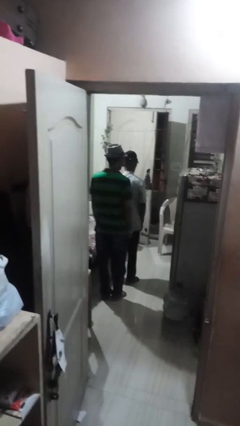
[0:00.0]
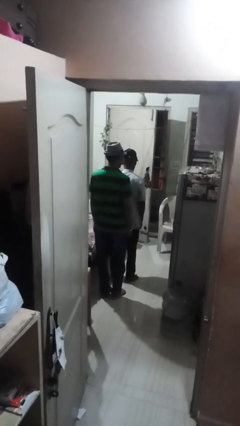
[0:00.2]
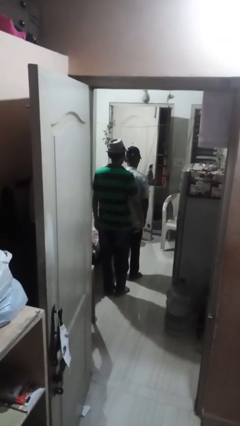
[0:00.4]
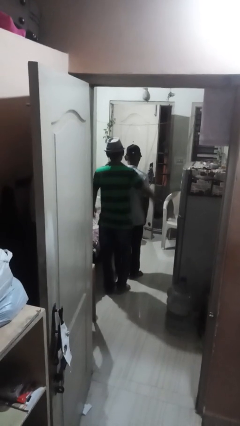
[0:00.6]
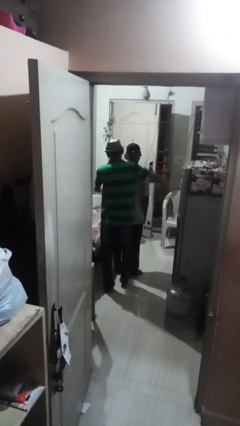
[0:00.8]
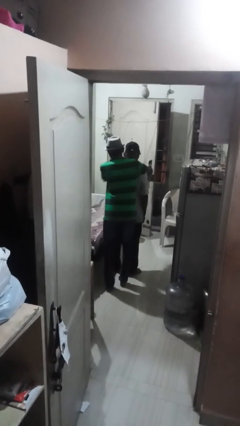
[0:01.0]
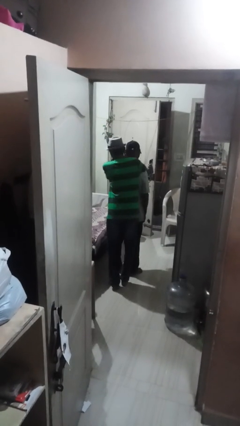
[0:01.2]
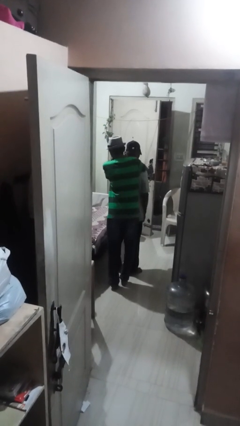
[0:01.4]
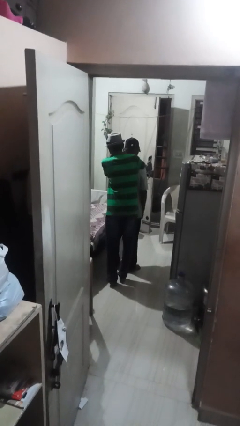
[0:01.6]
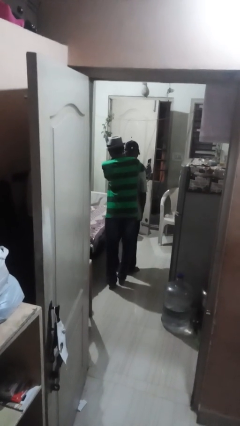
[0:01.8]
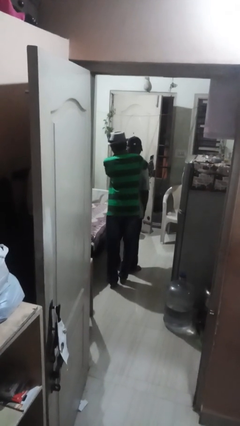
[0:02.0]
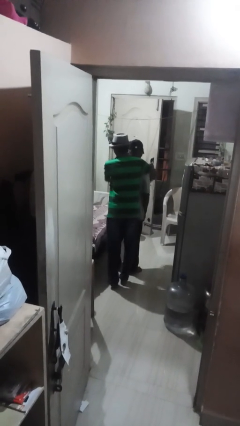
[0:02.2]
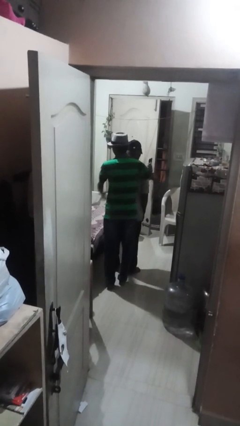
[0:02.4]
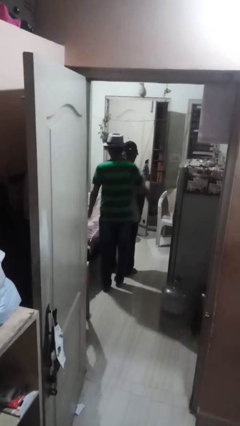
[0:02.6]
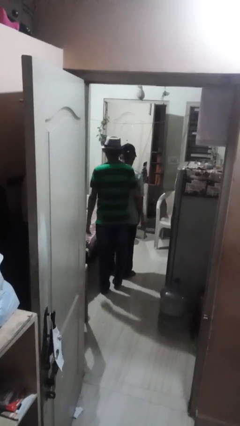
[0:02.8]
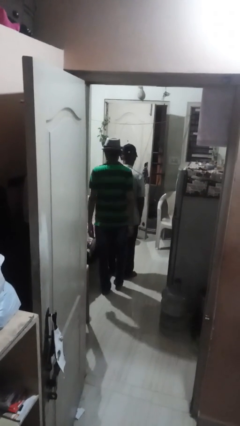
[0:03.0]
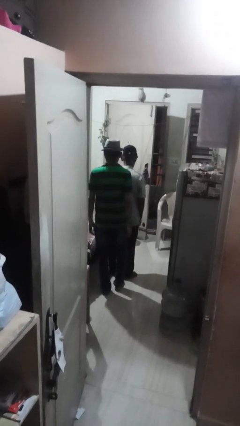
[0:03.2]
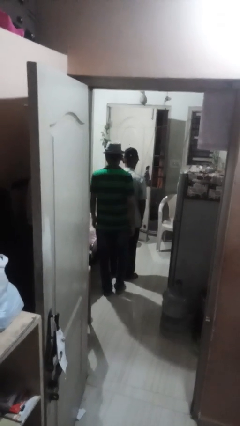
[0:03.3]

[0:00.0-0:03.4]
person hugs person from behind

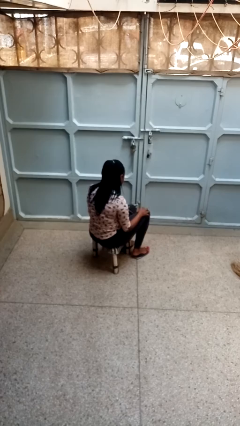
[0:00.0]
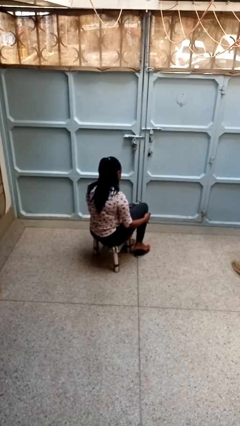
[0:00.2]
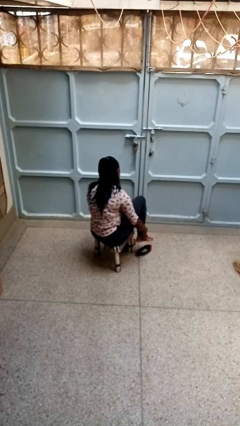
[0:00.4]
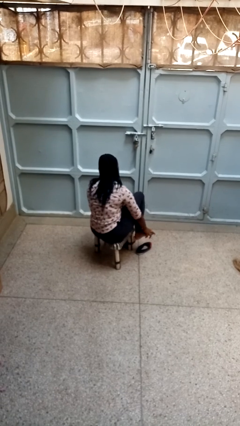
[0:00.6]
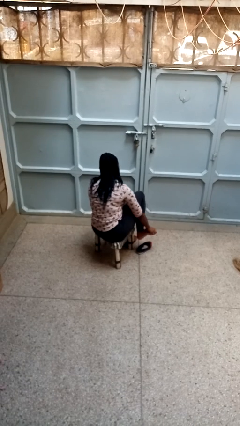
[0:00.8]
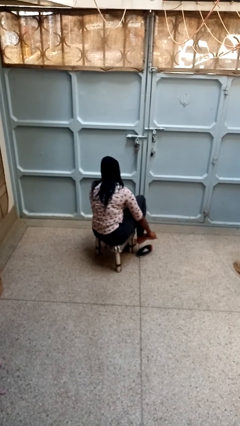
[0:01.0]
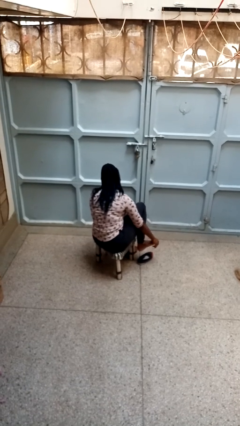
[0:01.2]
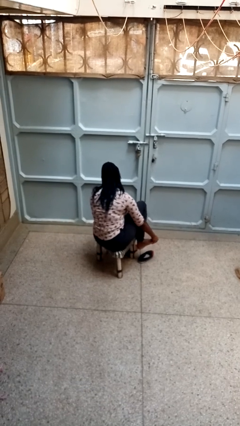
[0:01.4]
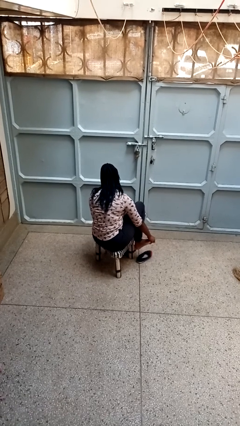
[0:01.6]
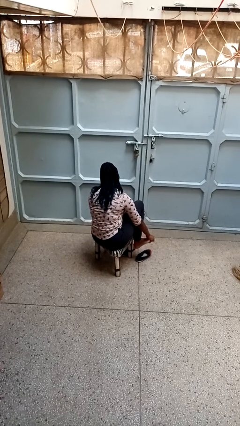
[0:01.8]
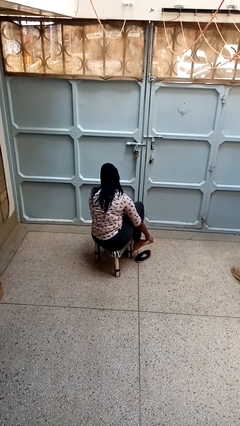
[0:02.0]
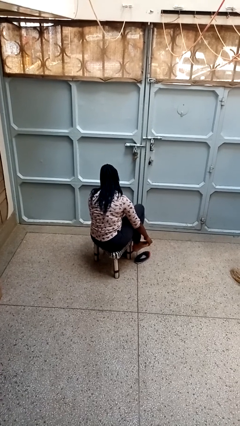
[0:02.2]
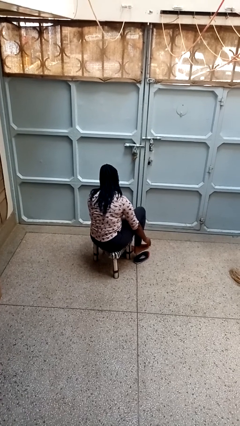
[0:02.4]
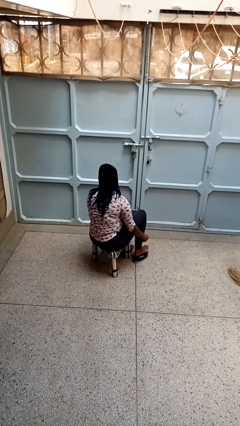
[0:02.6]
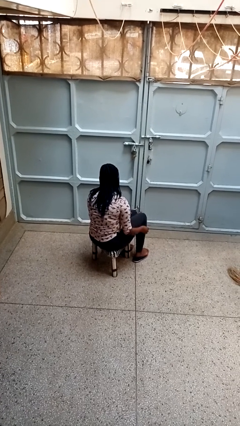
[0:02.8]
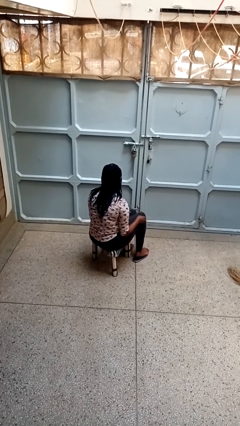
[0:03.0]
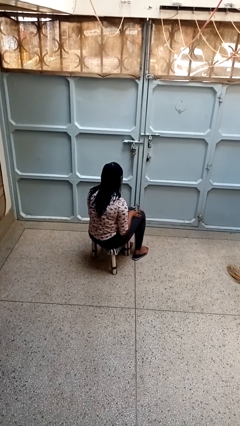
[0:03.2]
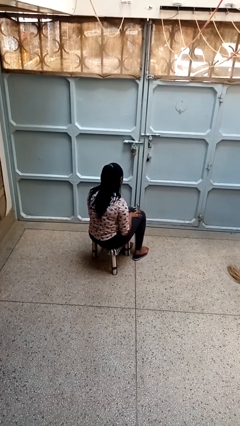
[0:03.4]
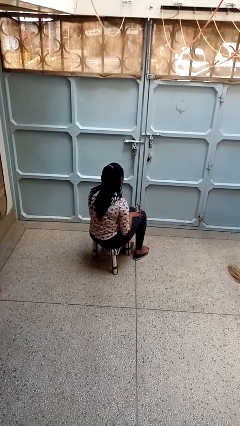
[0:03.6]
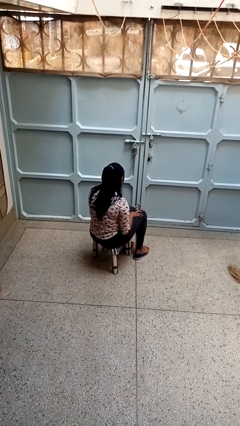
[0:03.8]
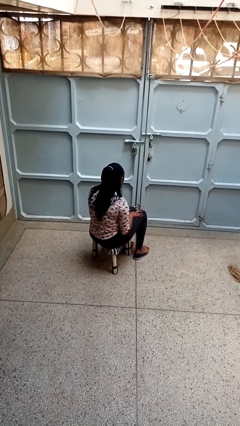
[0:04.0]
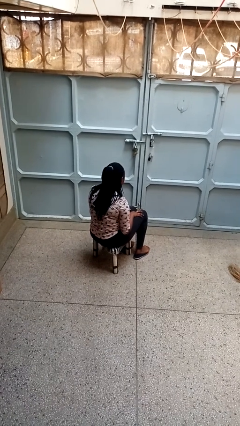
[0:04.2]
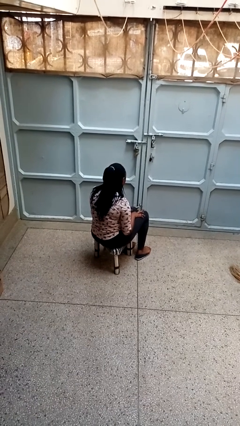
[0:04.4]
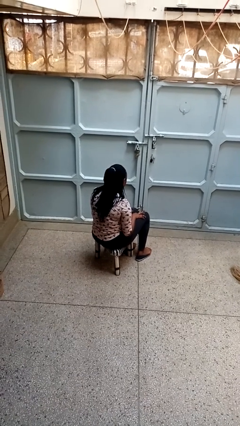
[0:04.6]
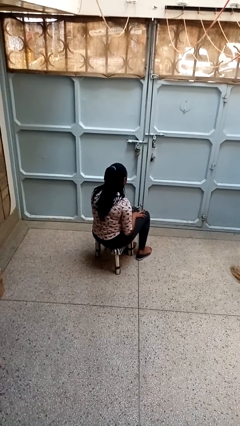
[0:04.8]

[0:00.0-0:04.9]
person rubs foot

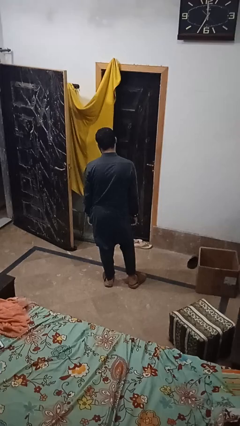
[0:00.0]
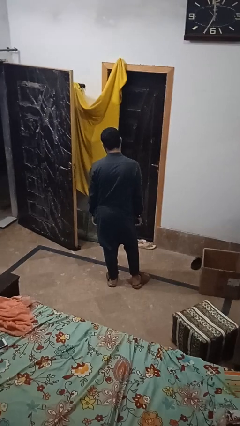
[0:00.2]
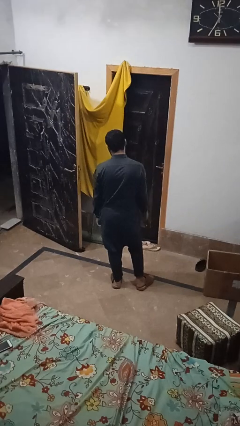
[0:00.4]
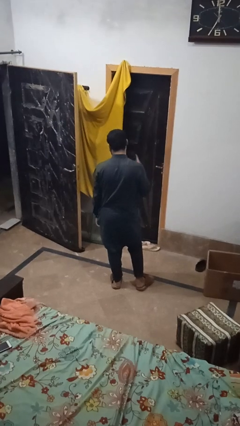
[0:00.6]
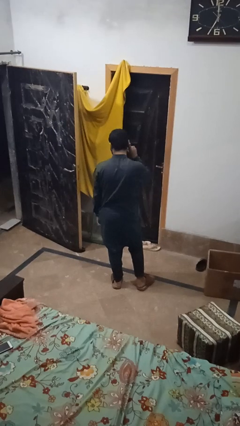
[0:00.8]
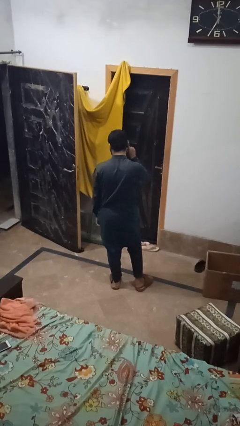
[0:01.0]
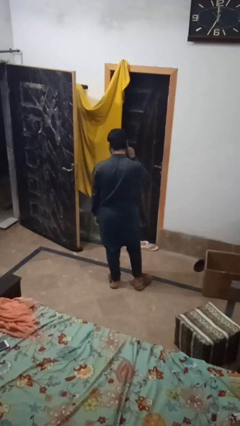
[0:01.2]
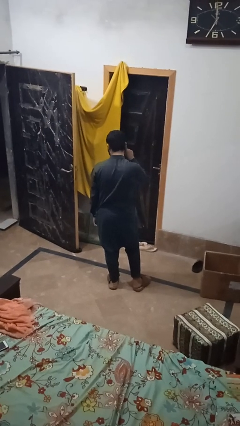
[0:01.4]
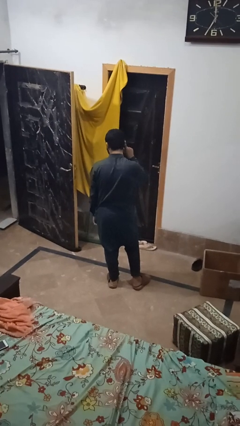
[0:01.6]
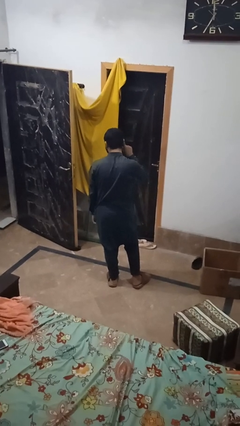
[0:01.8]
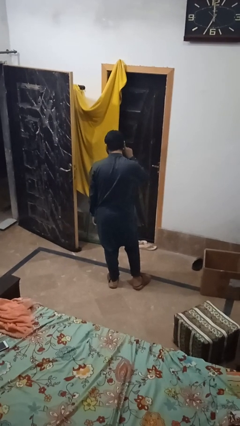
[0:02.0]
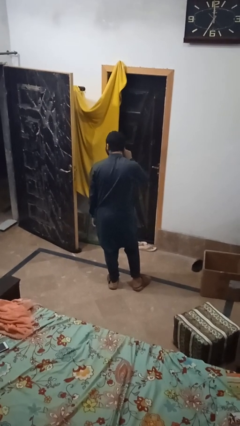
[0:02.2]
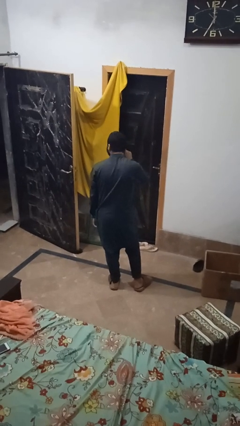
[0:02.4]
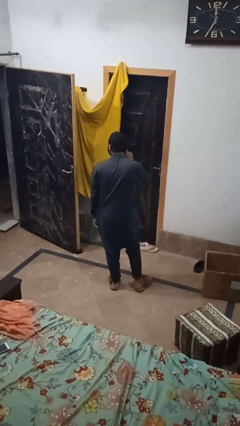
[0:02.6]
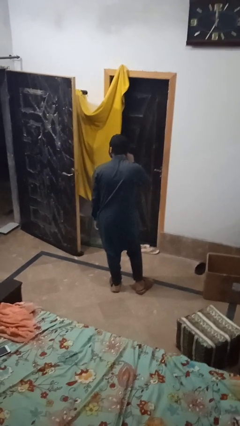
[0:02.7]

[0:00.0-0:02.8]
person gestures listen closely

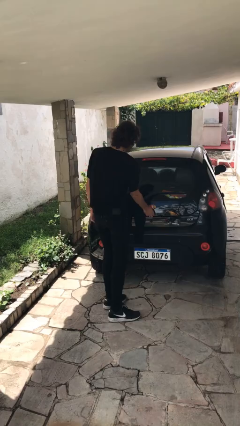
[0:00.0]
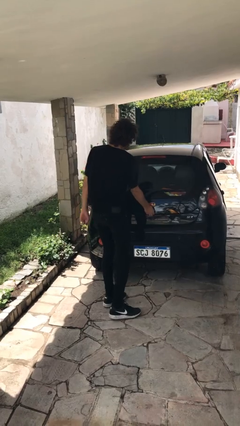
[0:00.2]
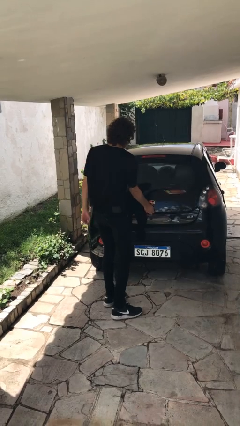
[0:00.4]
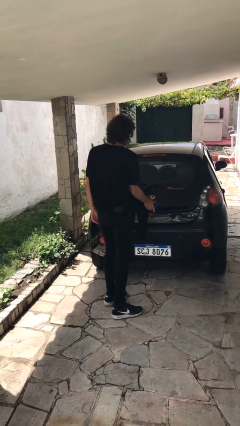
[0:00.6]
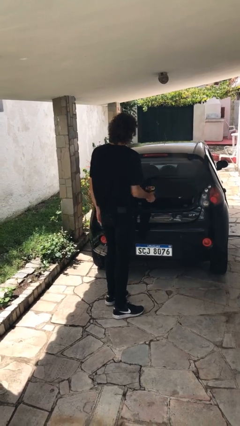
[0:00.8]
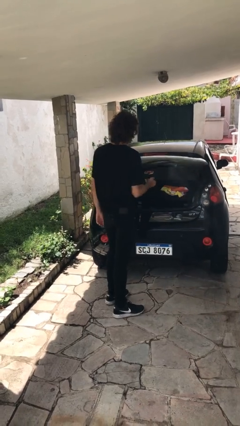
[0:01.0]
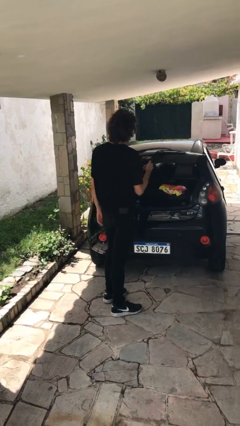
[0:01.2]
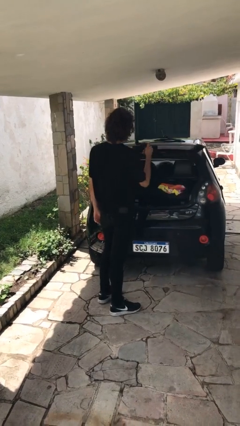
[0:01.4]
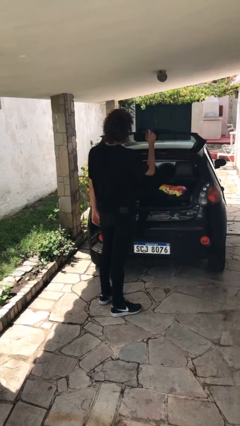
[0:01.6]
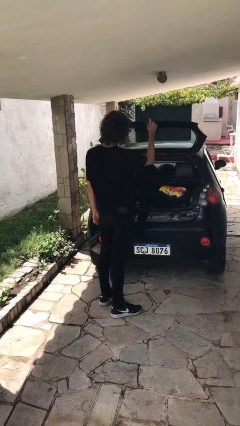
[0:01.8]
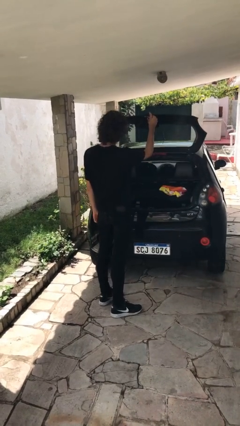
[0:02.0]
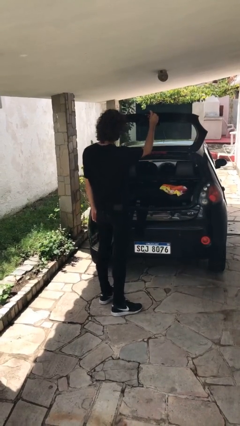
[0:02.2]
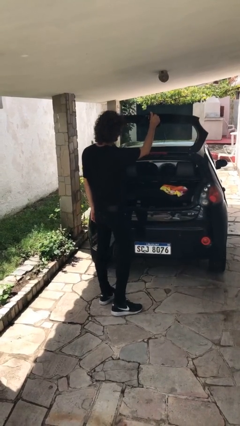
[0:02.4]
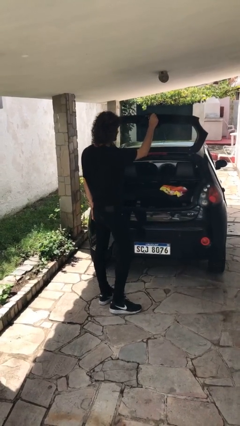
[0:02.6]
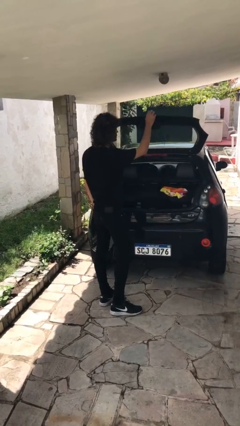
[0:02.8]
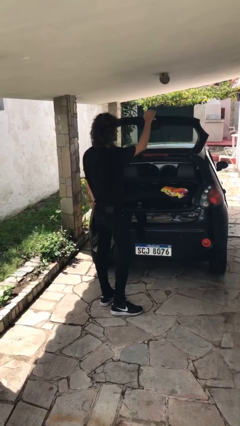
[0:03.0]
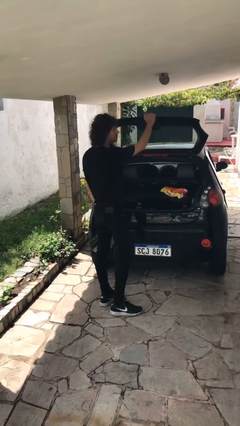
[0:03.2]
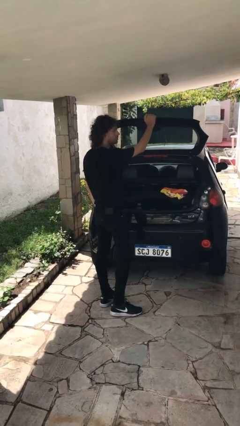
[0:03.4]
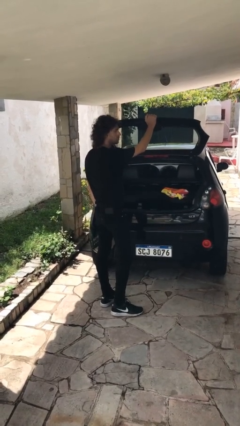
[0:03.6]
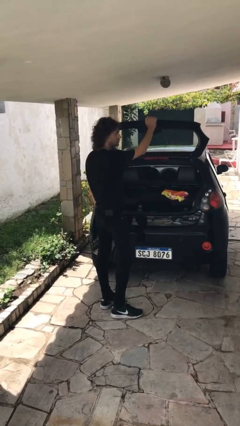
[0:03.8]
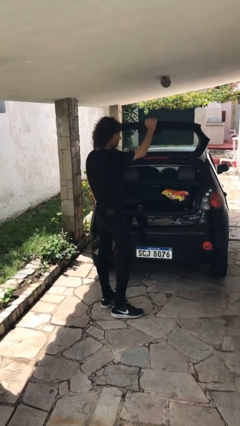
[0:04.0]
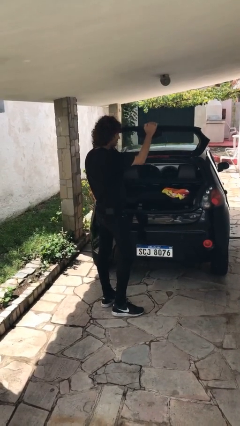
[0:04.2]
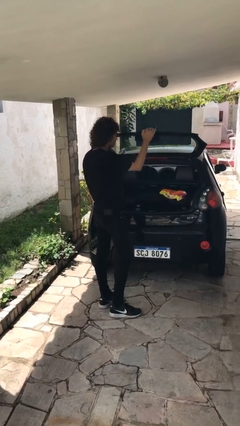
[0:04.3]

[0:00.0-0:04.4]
person opens car trunk

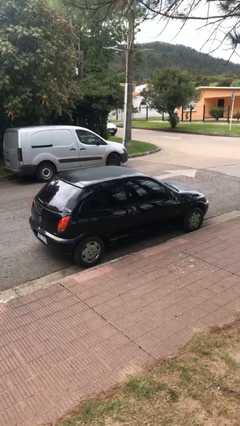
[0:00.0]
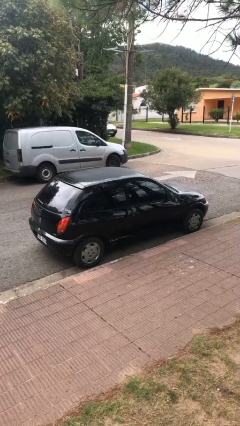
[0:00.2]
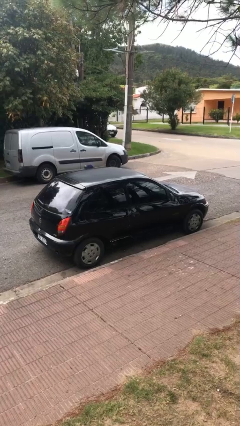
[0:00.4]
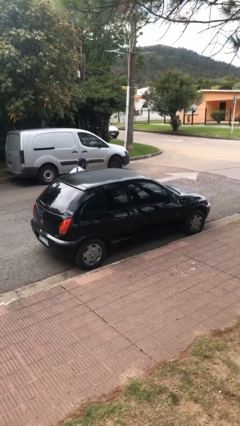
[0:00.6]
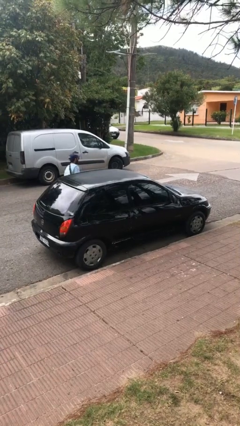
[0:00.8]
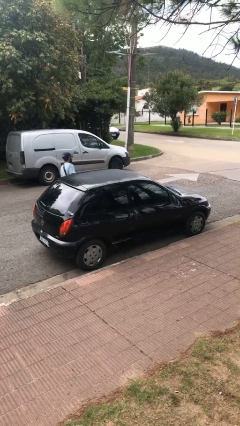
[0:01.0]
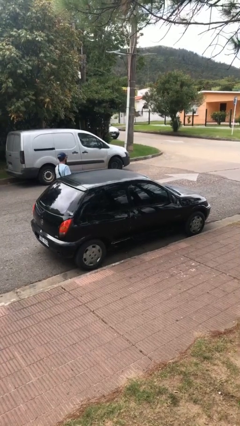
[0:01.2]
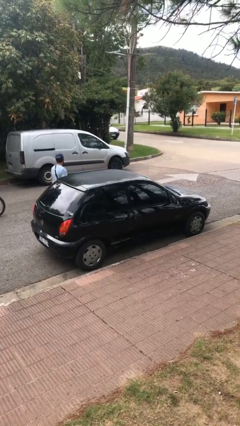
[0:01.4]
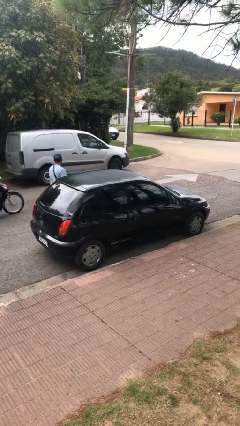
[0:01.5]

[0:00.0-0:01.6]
car drops off person

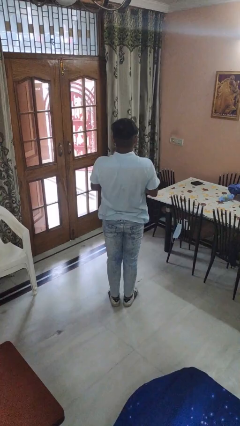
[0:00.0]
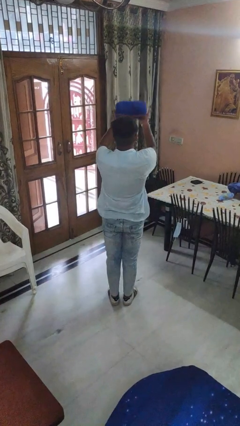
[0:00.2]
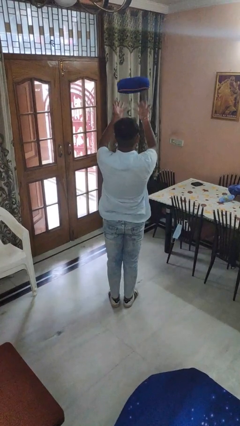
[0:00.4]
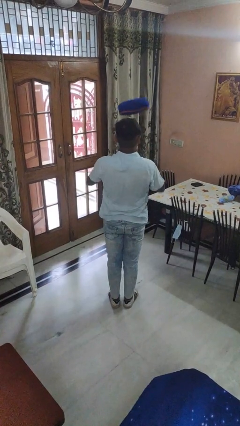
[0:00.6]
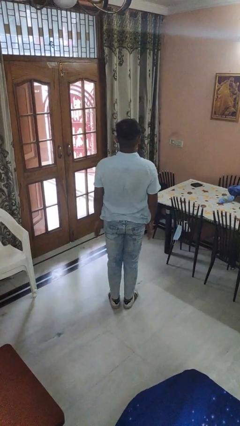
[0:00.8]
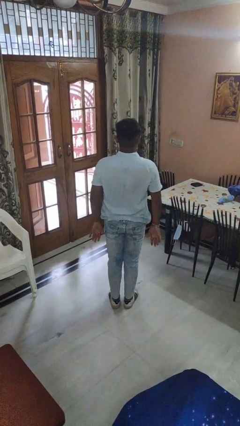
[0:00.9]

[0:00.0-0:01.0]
person throws object into air
